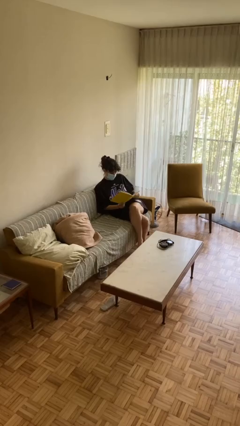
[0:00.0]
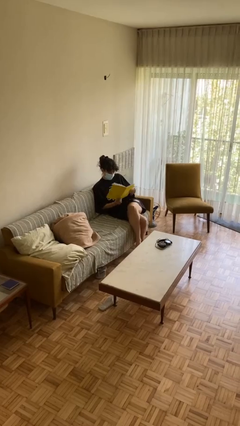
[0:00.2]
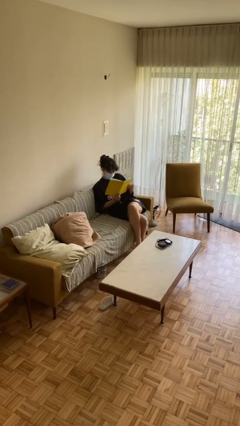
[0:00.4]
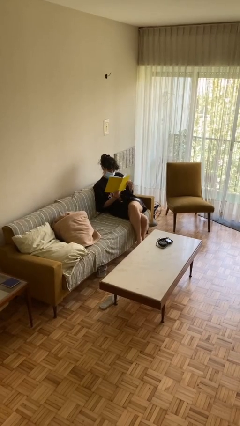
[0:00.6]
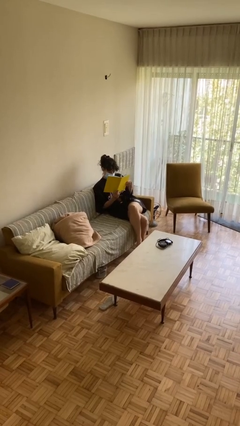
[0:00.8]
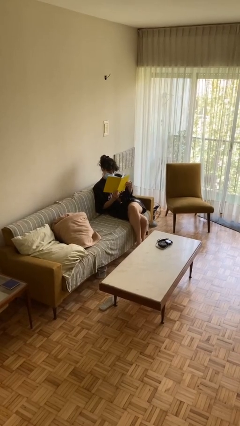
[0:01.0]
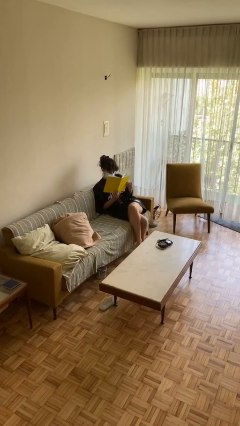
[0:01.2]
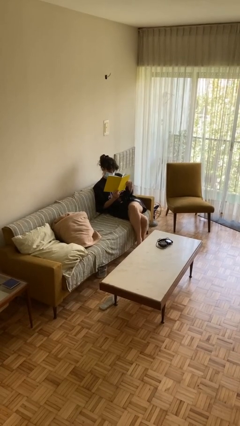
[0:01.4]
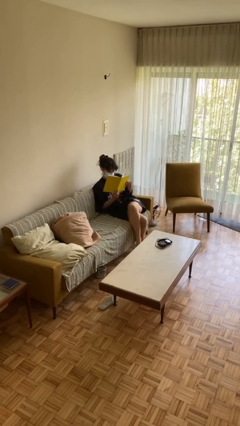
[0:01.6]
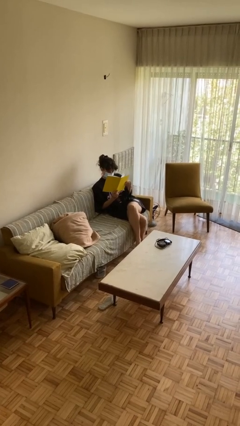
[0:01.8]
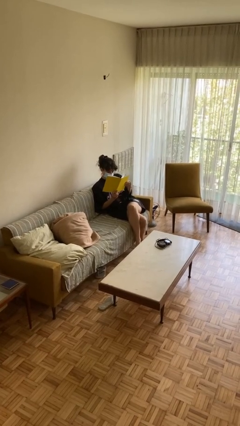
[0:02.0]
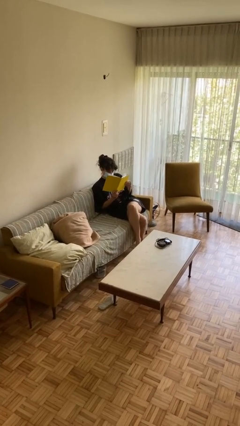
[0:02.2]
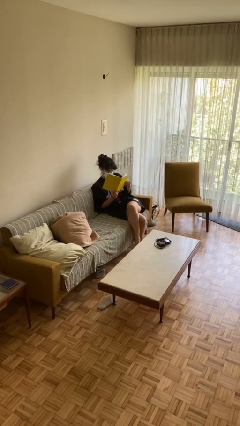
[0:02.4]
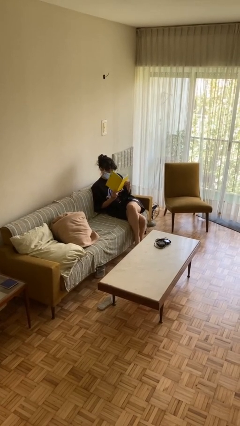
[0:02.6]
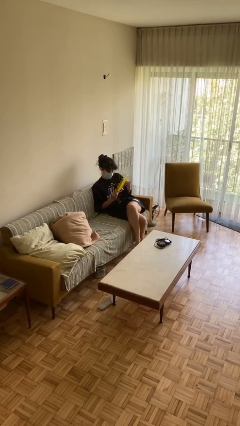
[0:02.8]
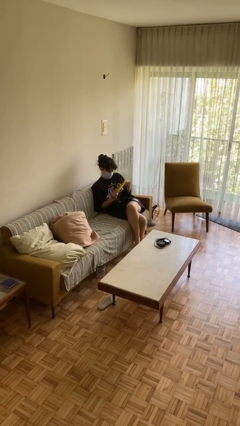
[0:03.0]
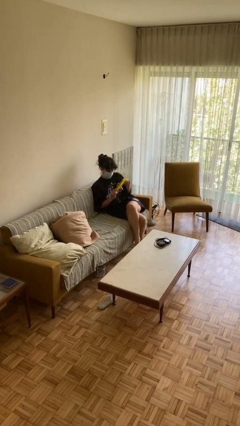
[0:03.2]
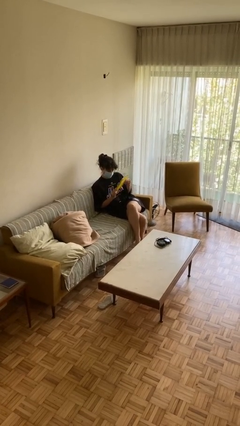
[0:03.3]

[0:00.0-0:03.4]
person reads document

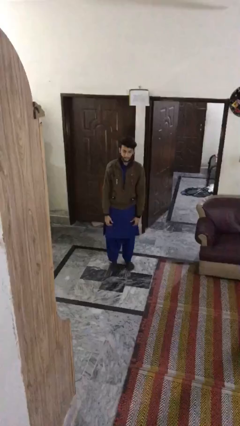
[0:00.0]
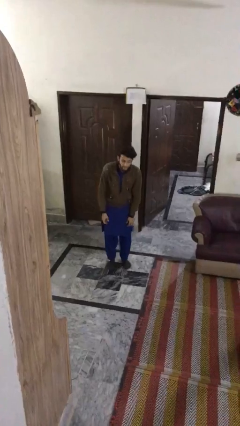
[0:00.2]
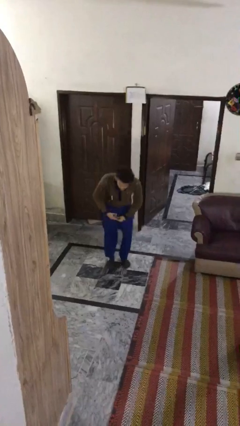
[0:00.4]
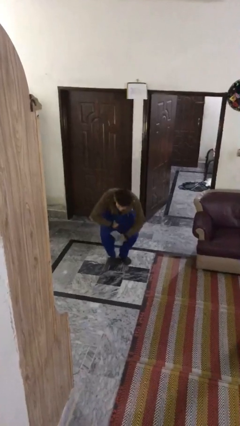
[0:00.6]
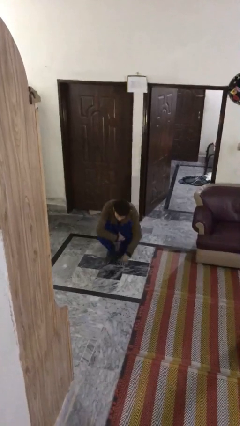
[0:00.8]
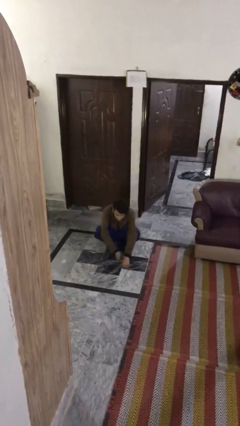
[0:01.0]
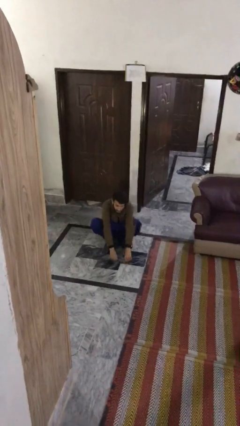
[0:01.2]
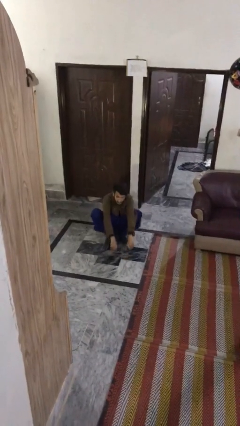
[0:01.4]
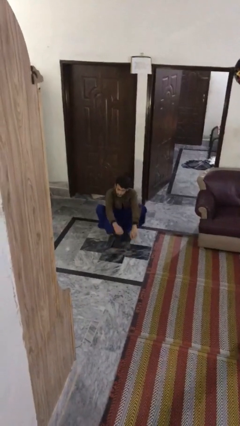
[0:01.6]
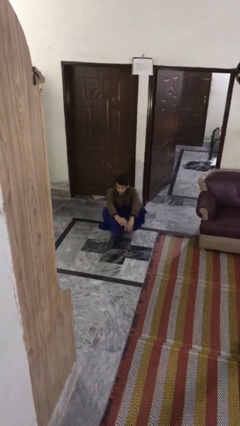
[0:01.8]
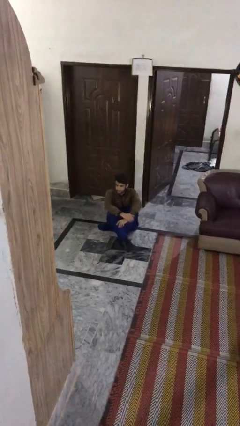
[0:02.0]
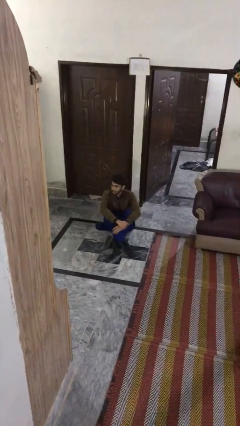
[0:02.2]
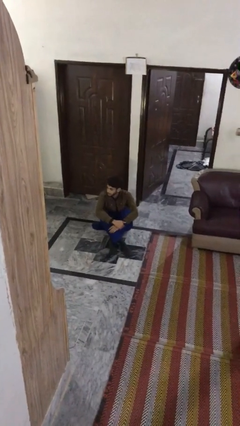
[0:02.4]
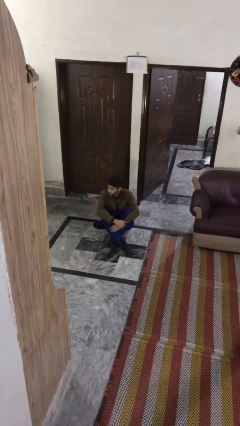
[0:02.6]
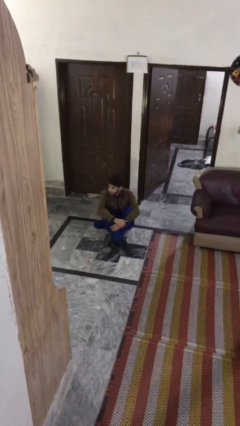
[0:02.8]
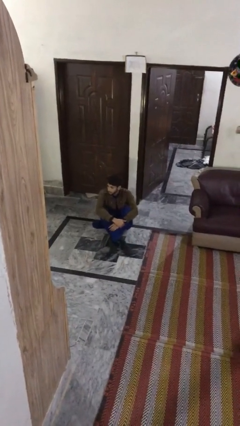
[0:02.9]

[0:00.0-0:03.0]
person sits down

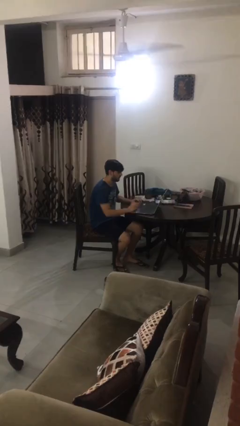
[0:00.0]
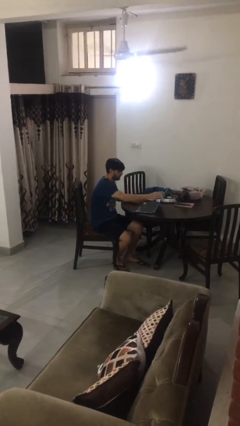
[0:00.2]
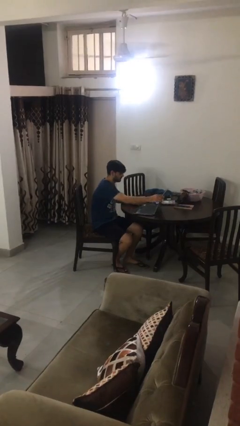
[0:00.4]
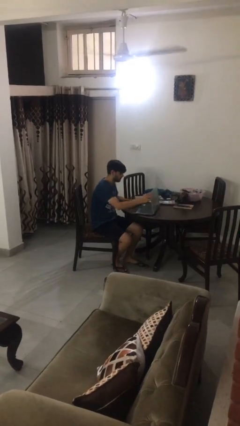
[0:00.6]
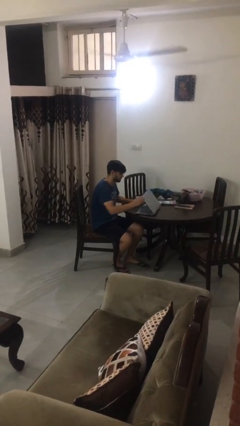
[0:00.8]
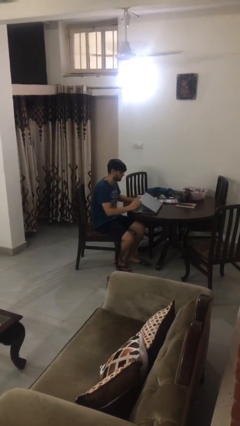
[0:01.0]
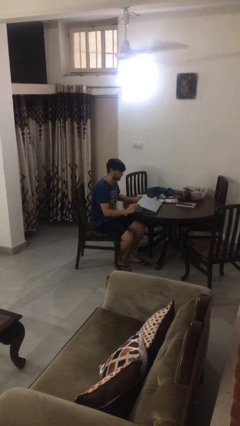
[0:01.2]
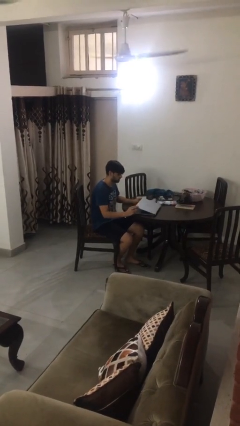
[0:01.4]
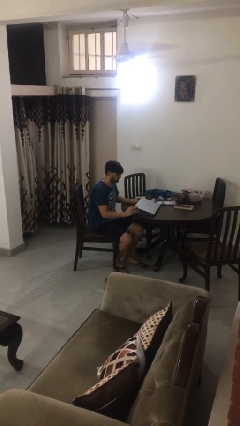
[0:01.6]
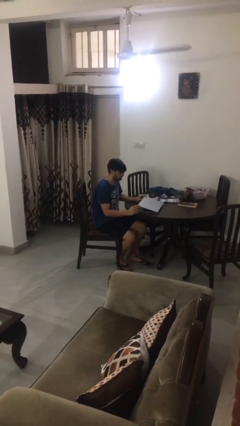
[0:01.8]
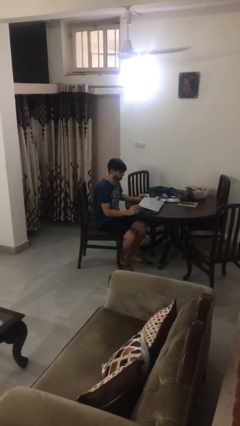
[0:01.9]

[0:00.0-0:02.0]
person closes laptop

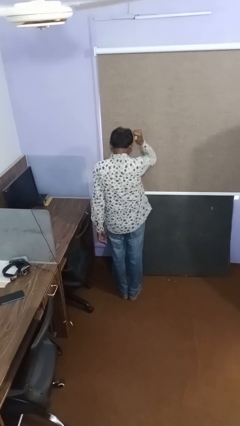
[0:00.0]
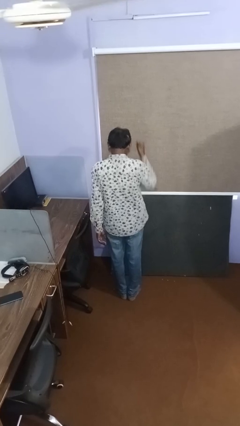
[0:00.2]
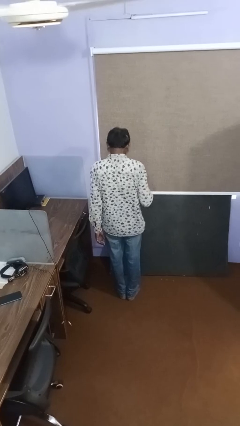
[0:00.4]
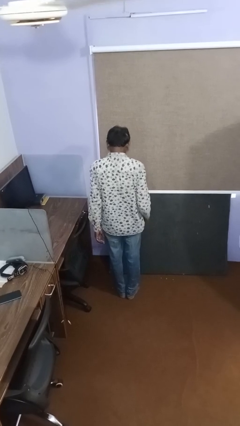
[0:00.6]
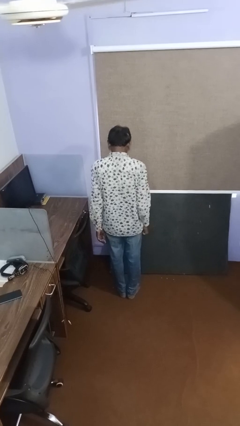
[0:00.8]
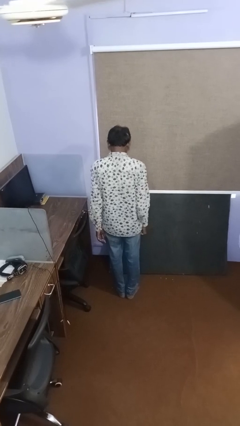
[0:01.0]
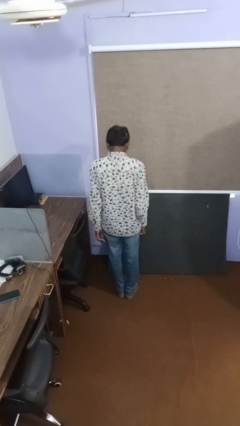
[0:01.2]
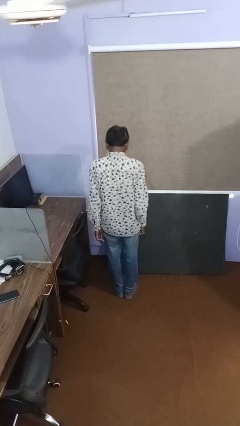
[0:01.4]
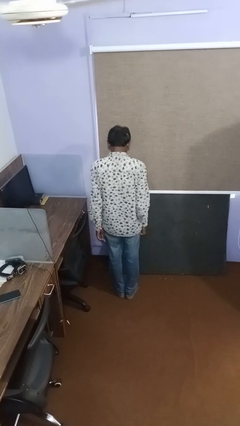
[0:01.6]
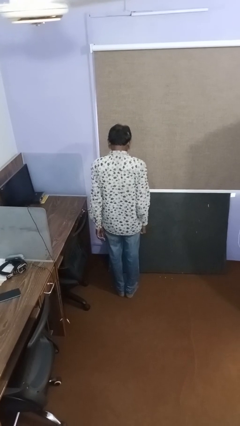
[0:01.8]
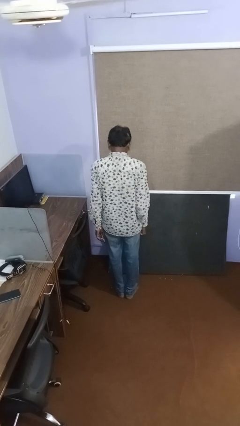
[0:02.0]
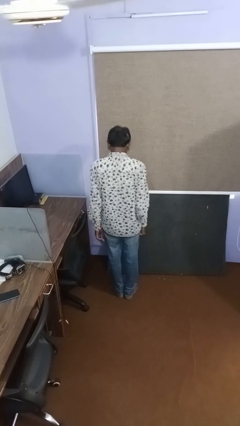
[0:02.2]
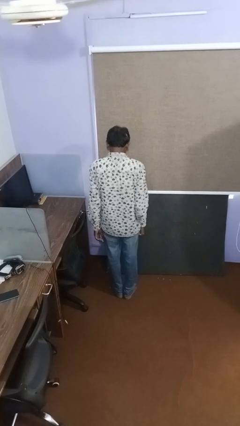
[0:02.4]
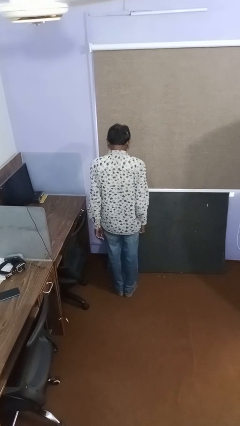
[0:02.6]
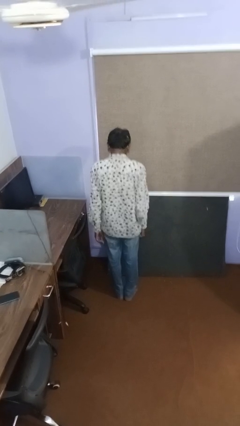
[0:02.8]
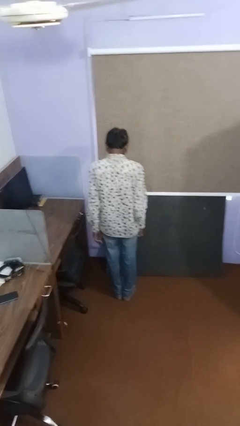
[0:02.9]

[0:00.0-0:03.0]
person gestures thumbs down

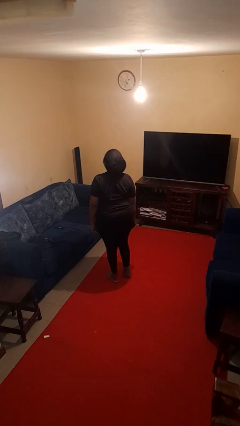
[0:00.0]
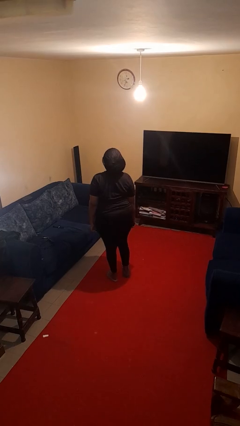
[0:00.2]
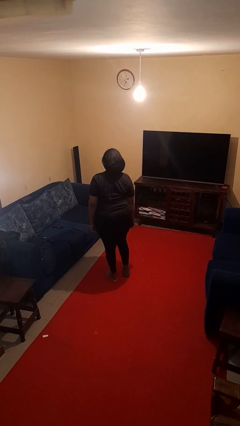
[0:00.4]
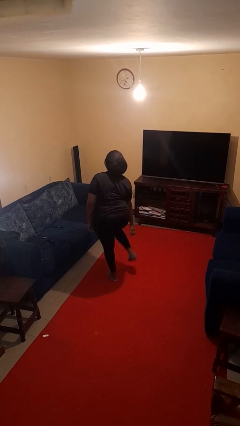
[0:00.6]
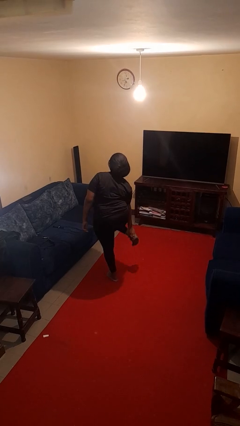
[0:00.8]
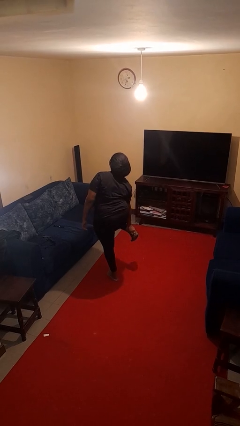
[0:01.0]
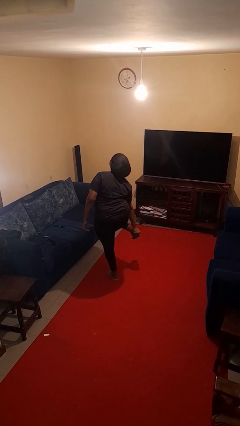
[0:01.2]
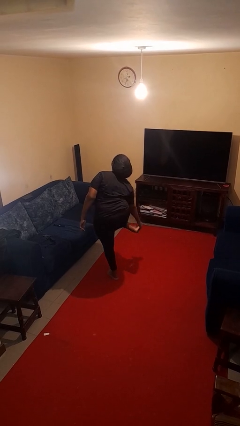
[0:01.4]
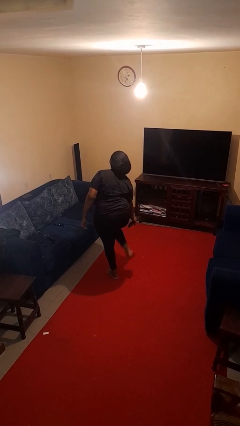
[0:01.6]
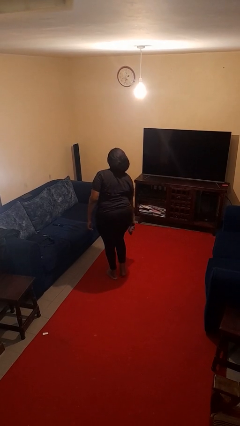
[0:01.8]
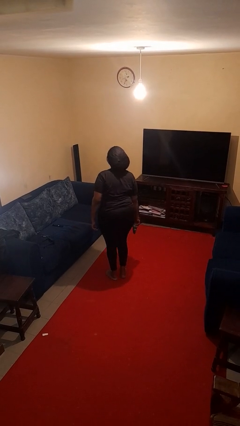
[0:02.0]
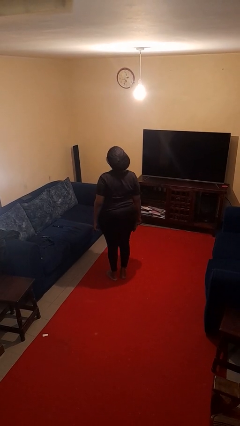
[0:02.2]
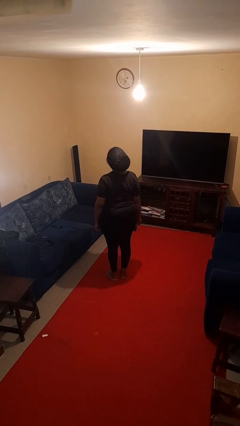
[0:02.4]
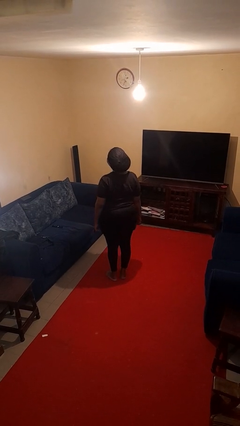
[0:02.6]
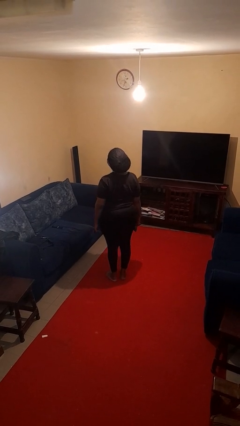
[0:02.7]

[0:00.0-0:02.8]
person takes off socks

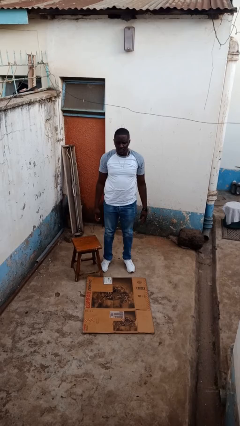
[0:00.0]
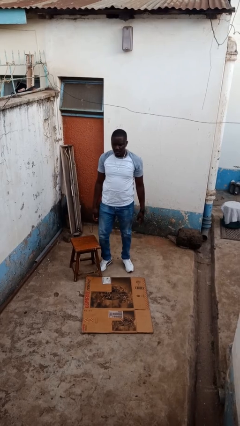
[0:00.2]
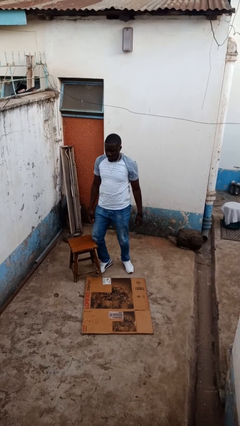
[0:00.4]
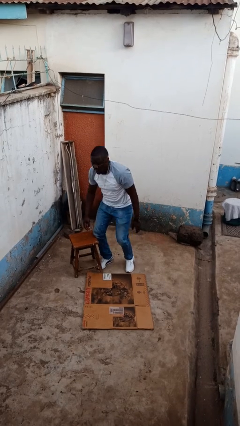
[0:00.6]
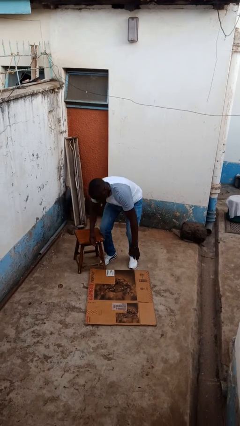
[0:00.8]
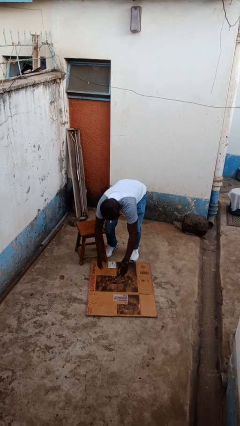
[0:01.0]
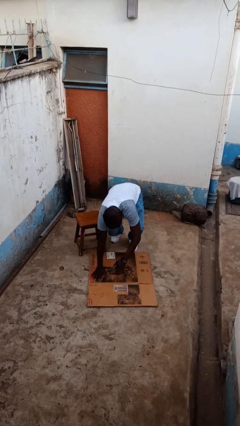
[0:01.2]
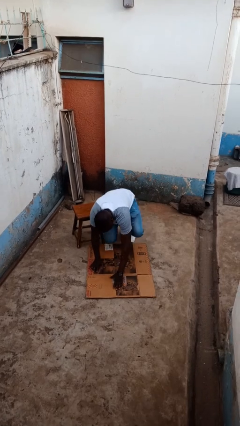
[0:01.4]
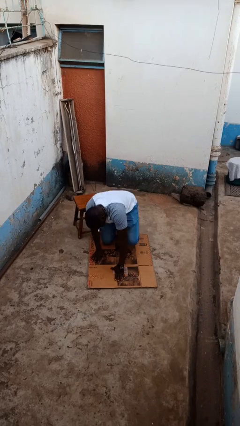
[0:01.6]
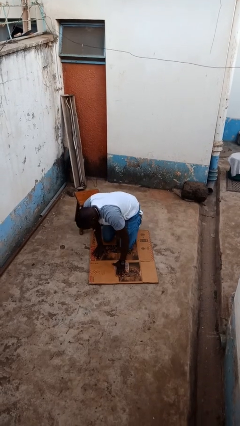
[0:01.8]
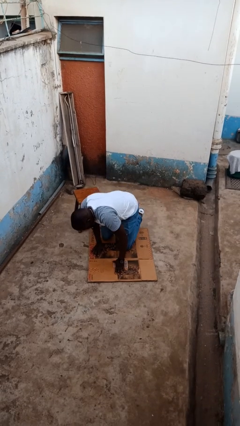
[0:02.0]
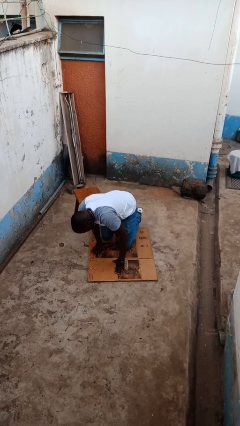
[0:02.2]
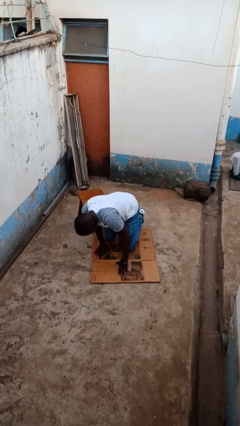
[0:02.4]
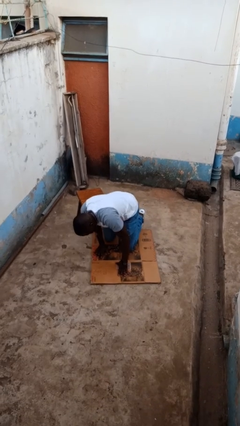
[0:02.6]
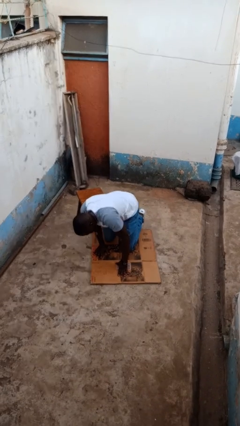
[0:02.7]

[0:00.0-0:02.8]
person trips on object on floor

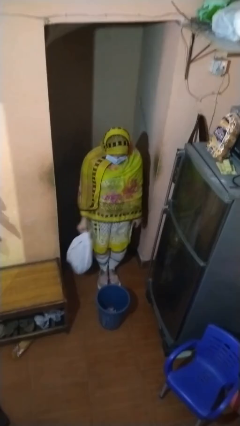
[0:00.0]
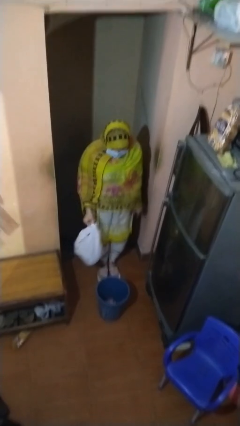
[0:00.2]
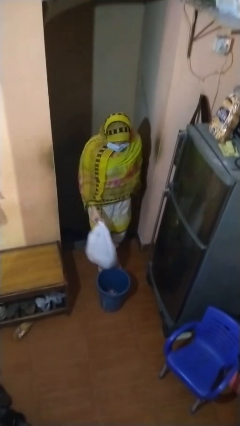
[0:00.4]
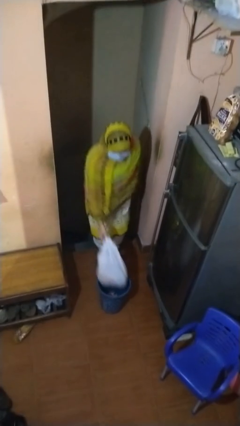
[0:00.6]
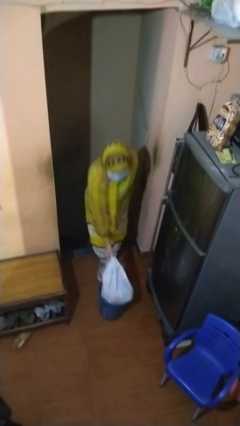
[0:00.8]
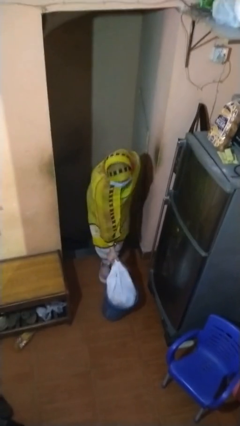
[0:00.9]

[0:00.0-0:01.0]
person inserts trashbag into trashcan
